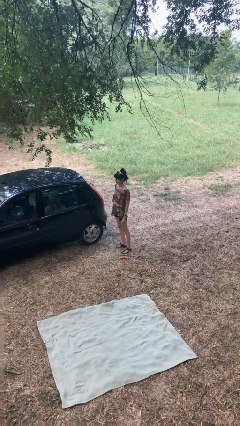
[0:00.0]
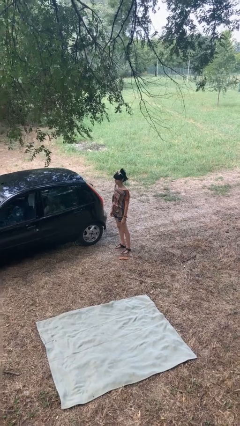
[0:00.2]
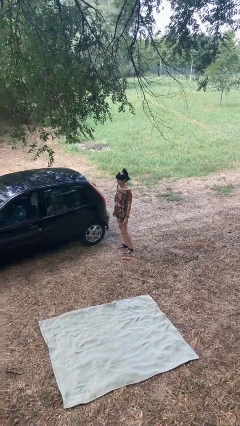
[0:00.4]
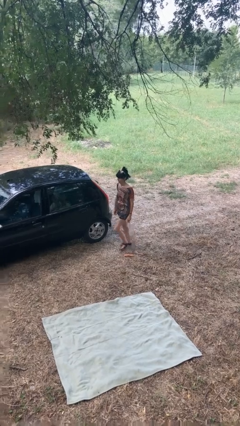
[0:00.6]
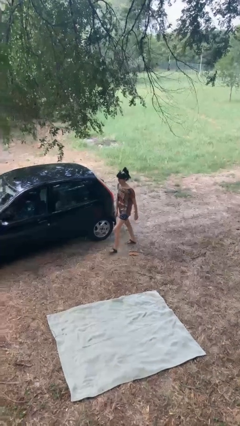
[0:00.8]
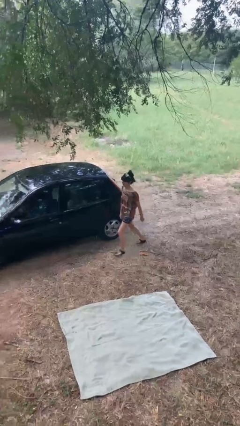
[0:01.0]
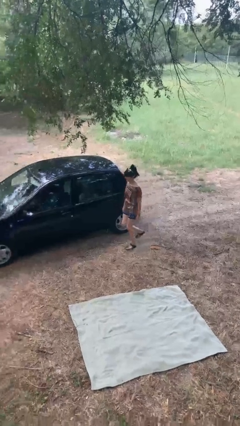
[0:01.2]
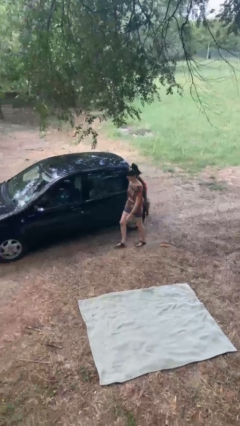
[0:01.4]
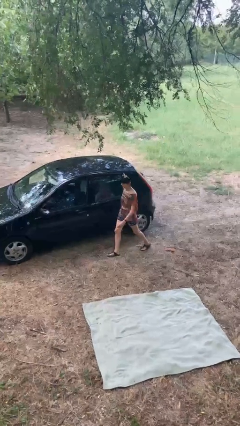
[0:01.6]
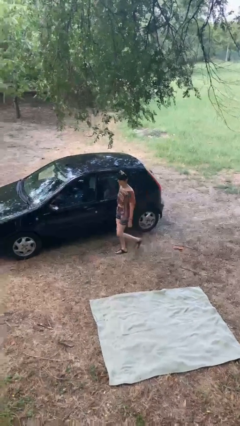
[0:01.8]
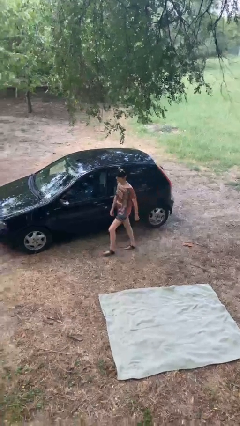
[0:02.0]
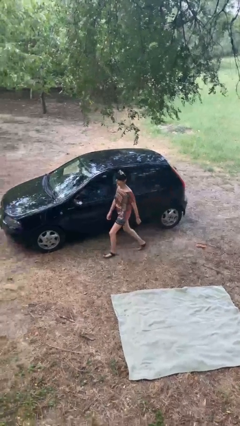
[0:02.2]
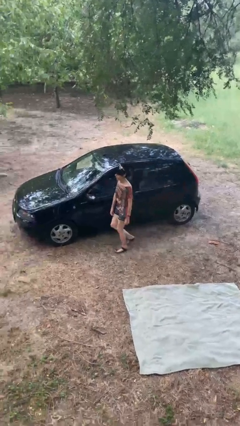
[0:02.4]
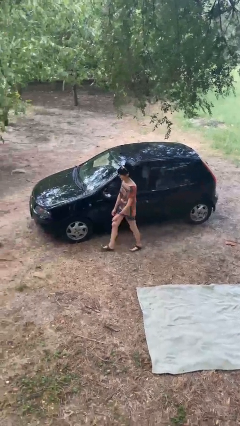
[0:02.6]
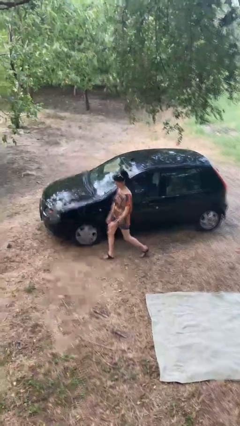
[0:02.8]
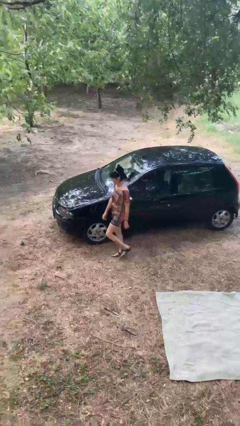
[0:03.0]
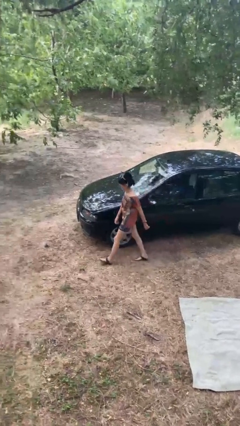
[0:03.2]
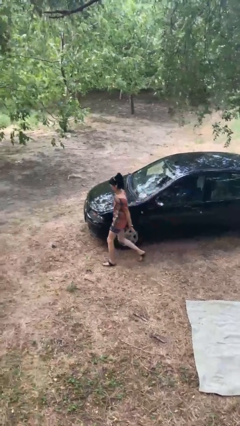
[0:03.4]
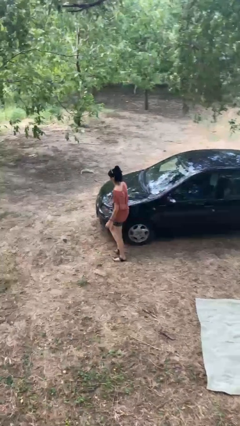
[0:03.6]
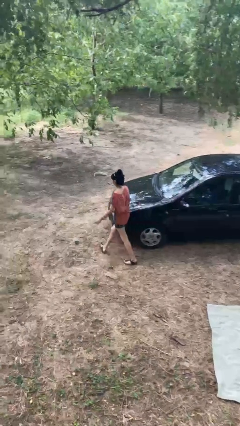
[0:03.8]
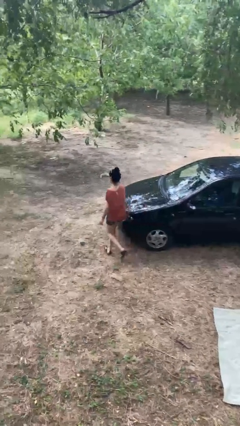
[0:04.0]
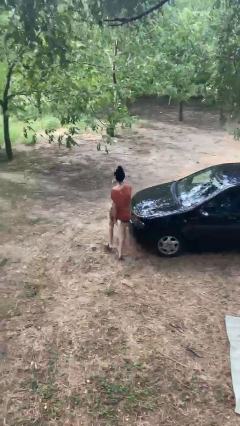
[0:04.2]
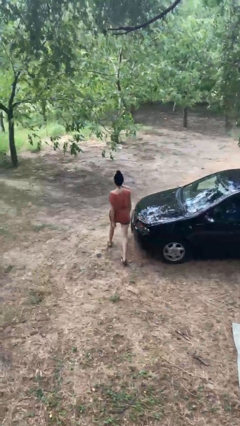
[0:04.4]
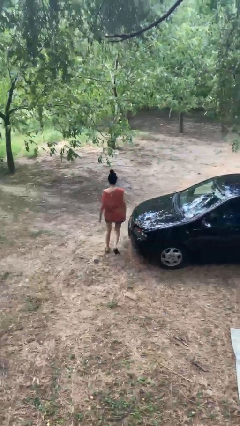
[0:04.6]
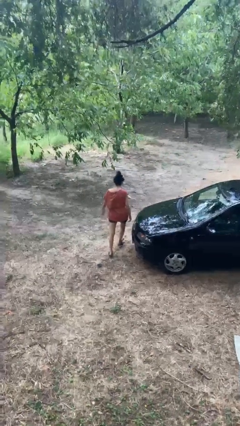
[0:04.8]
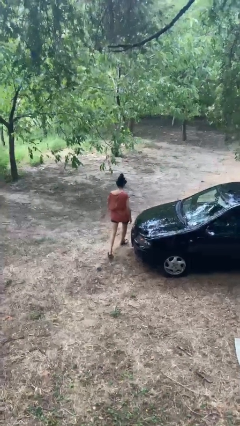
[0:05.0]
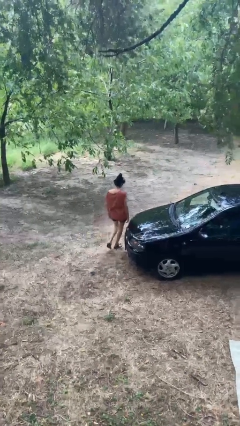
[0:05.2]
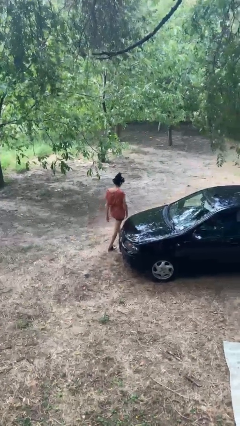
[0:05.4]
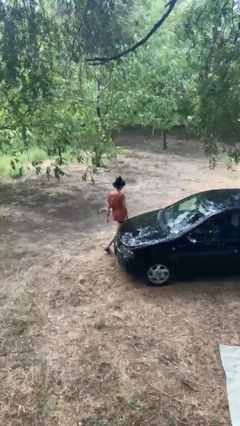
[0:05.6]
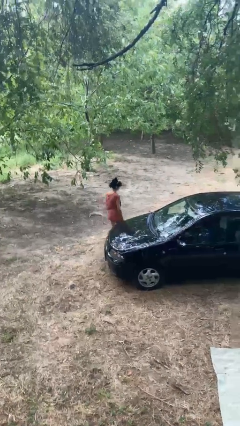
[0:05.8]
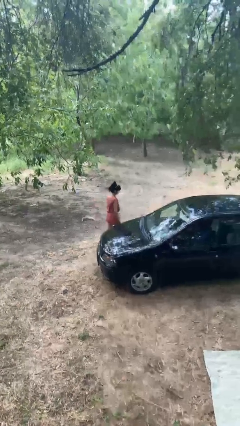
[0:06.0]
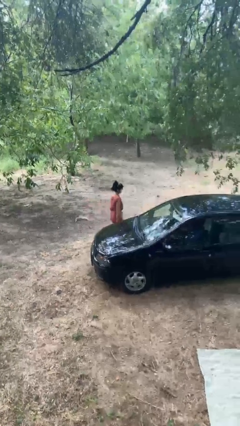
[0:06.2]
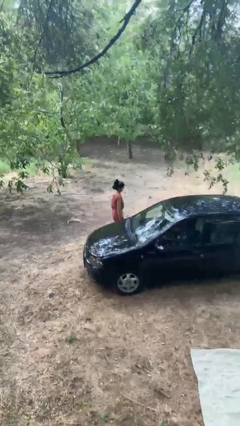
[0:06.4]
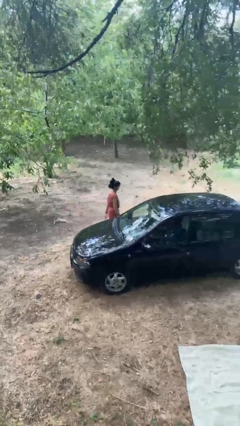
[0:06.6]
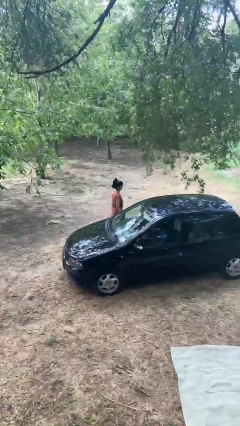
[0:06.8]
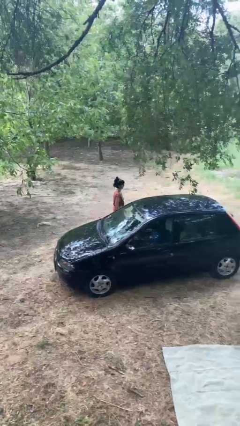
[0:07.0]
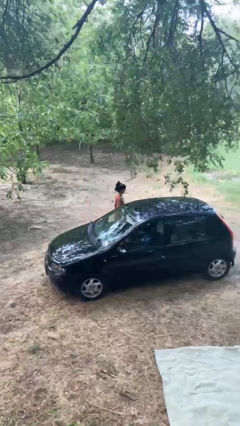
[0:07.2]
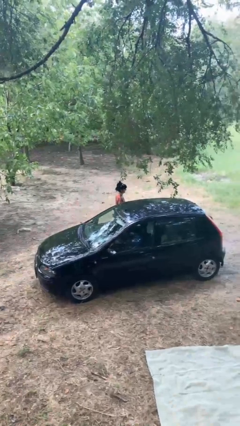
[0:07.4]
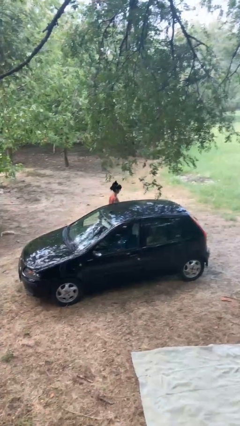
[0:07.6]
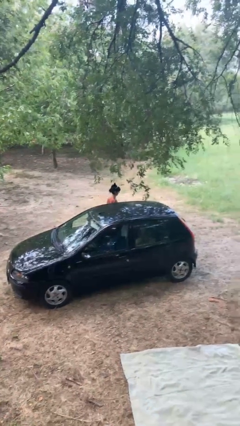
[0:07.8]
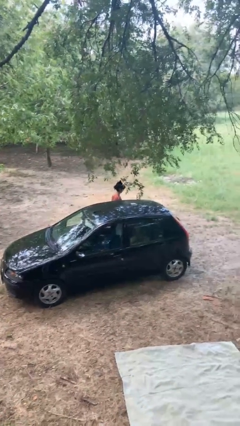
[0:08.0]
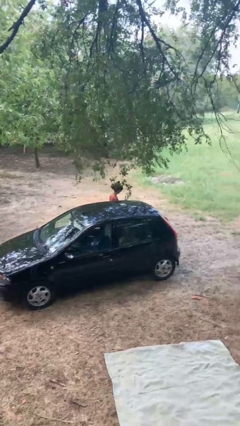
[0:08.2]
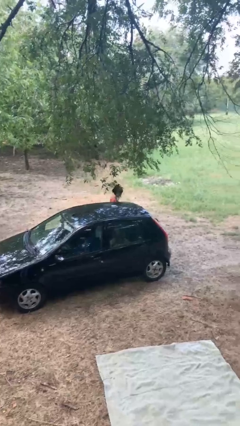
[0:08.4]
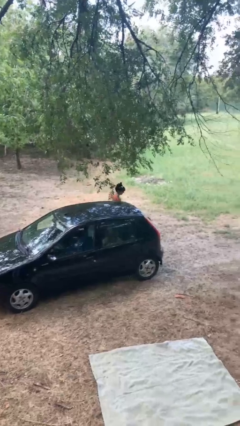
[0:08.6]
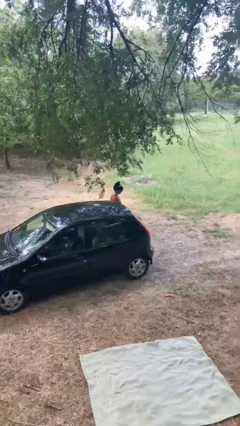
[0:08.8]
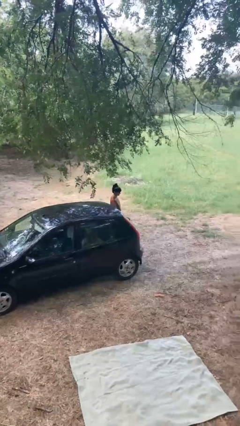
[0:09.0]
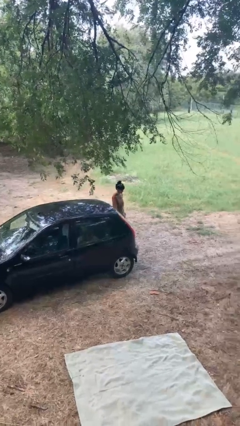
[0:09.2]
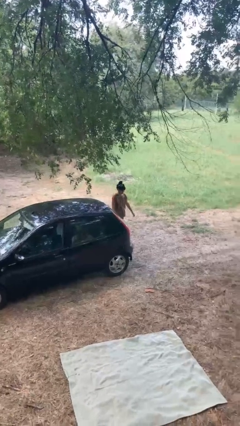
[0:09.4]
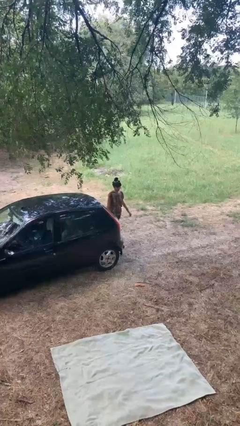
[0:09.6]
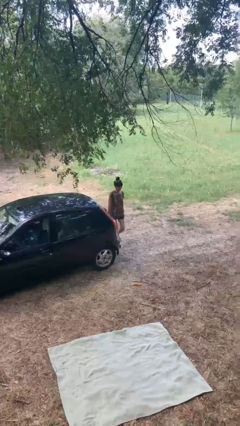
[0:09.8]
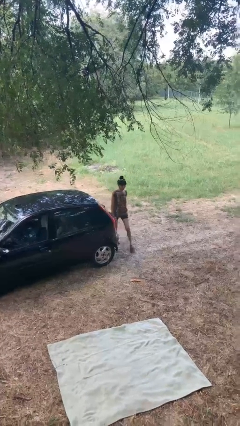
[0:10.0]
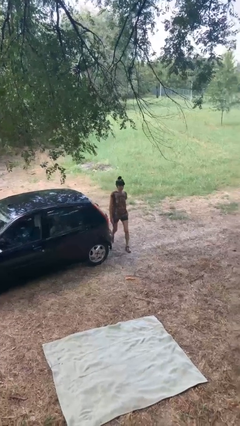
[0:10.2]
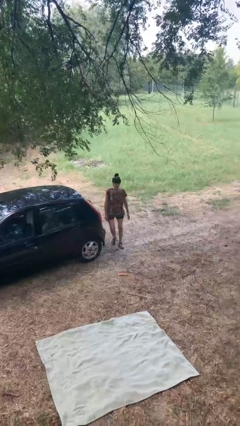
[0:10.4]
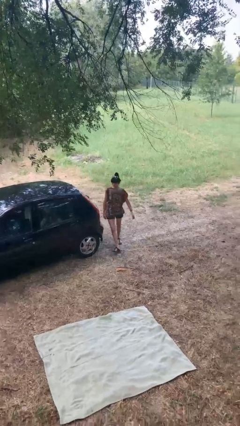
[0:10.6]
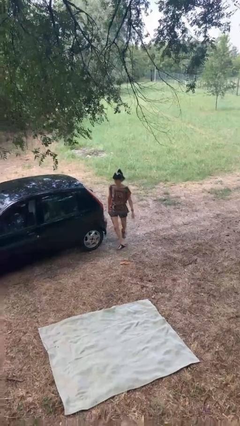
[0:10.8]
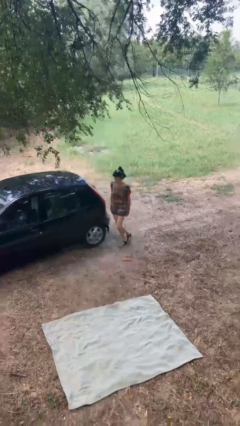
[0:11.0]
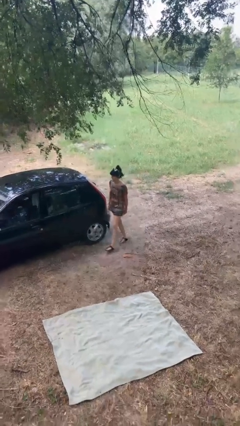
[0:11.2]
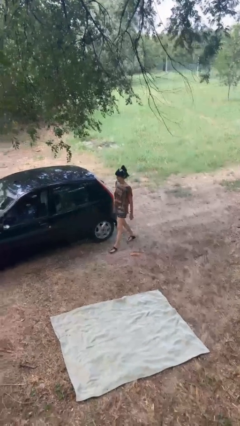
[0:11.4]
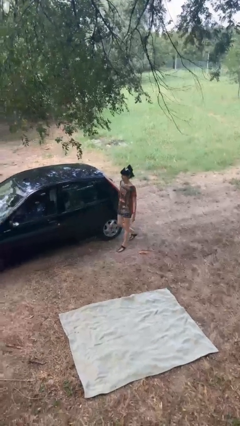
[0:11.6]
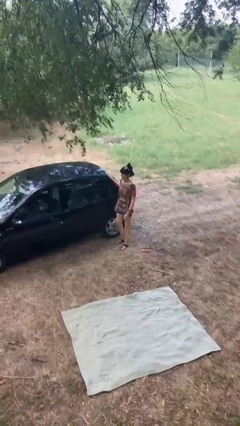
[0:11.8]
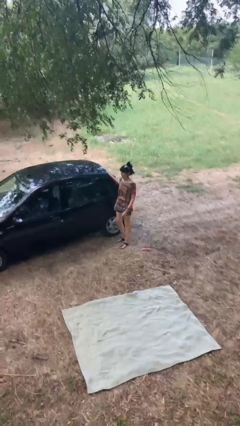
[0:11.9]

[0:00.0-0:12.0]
person walks around car

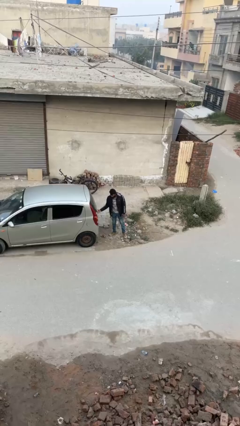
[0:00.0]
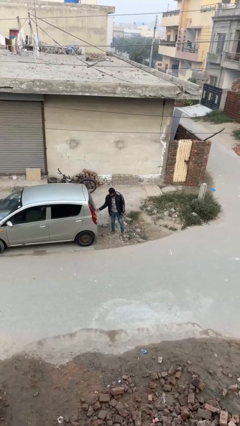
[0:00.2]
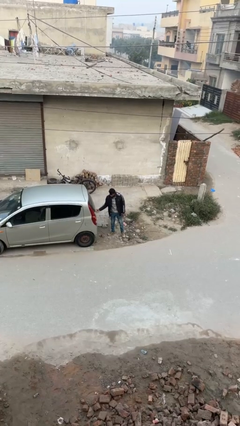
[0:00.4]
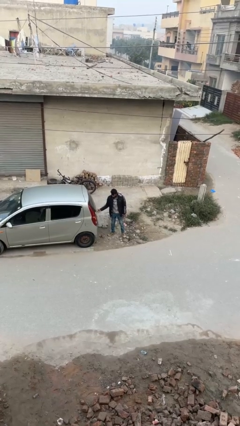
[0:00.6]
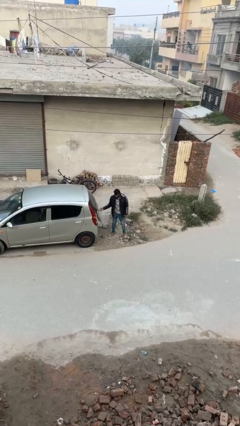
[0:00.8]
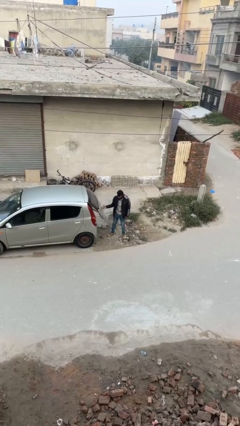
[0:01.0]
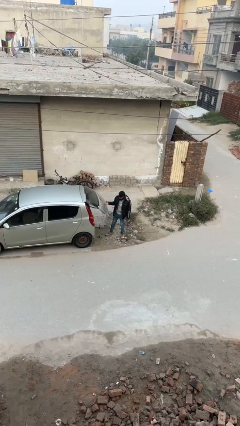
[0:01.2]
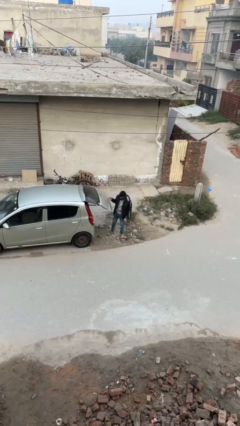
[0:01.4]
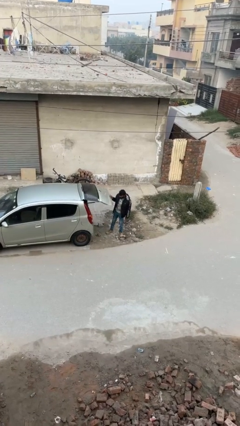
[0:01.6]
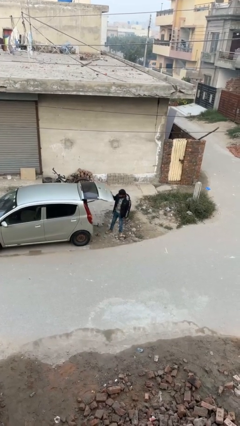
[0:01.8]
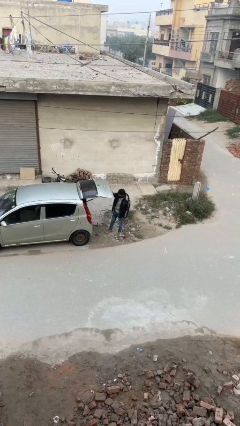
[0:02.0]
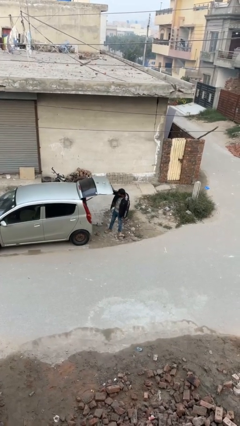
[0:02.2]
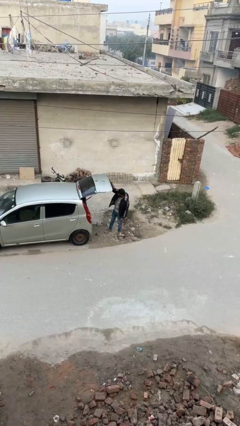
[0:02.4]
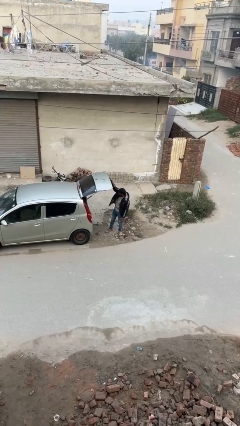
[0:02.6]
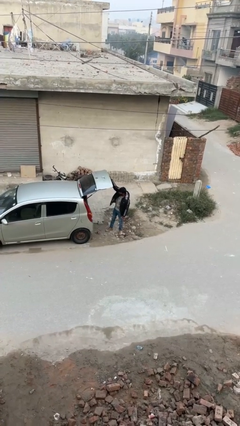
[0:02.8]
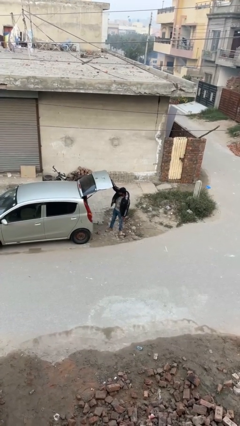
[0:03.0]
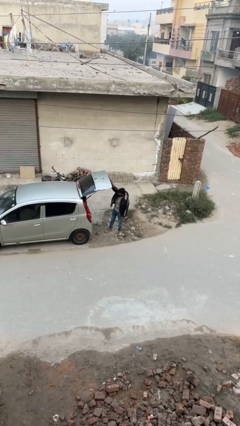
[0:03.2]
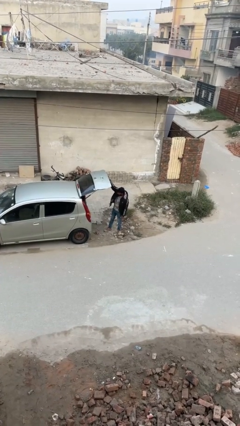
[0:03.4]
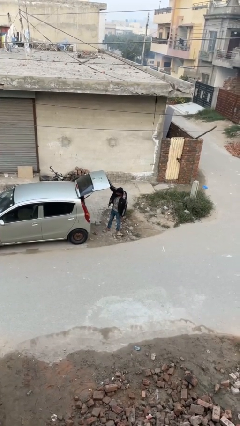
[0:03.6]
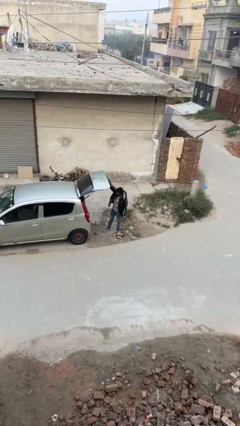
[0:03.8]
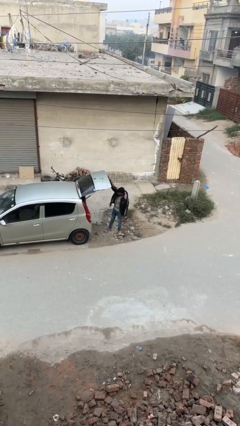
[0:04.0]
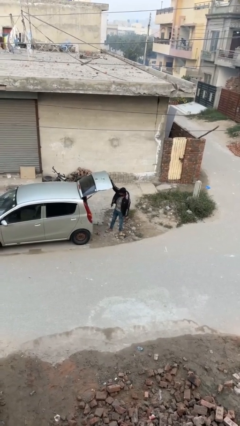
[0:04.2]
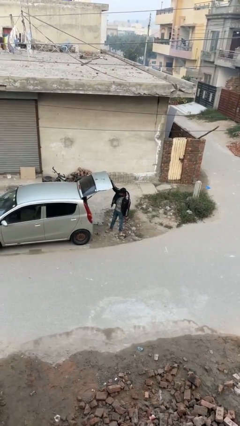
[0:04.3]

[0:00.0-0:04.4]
person opens car trunk

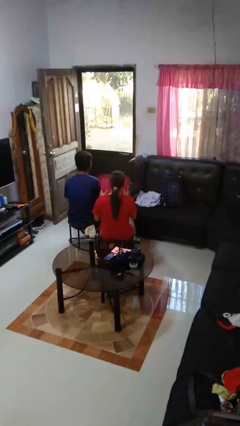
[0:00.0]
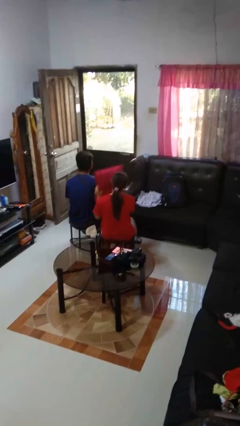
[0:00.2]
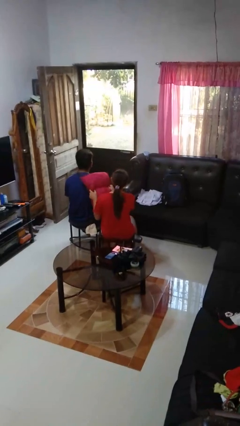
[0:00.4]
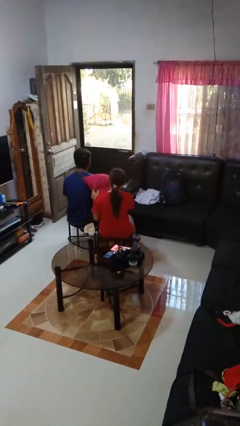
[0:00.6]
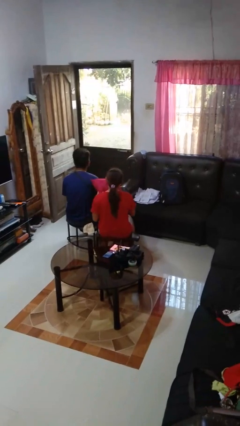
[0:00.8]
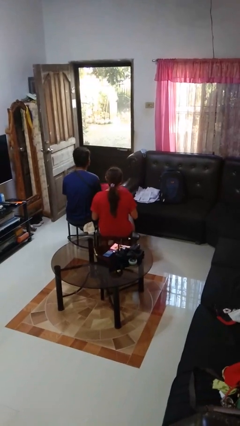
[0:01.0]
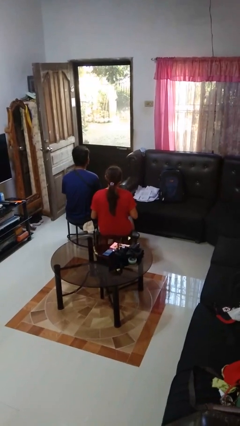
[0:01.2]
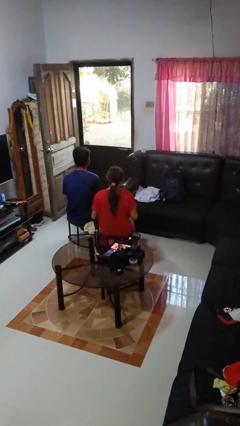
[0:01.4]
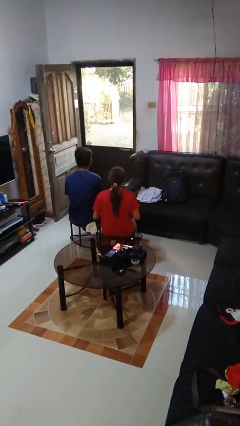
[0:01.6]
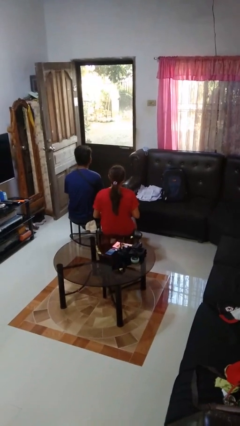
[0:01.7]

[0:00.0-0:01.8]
person hits person with pillow
